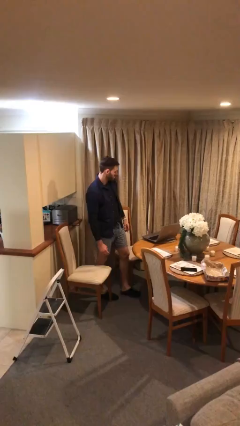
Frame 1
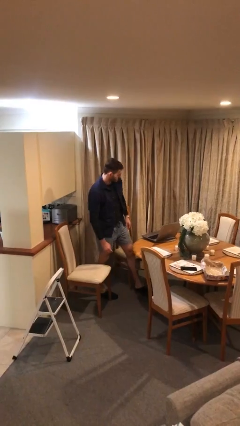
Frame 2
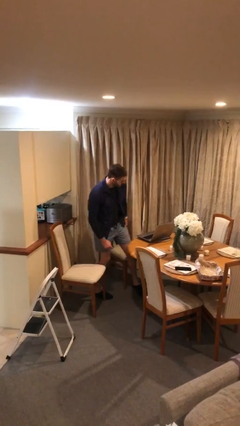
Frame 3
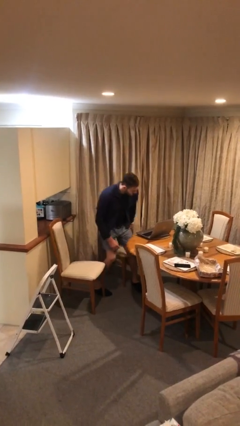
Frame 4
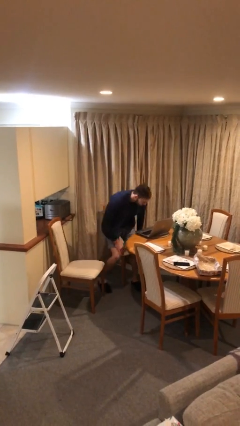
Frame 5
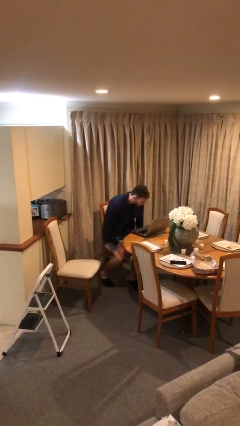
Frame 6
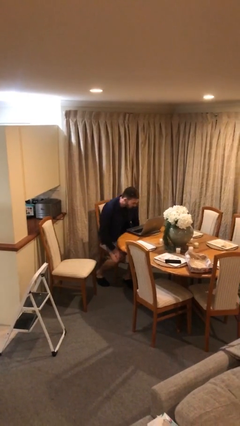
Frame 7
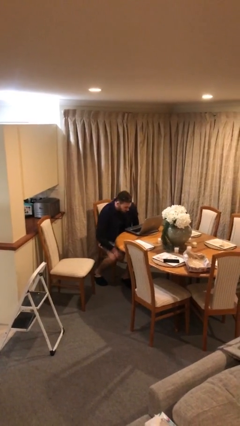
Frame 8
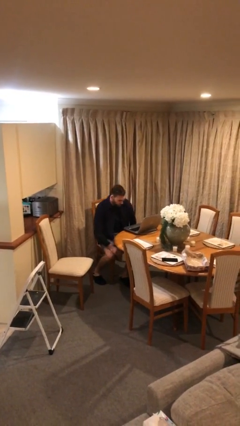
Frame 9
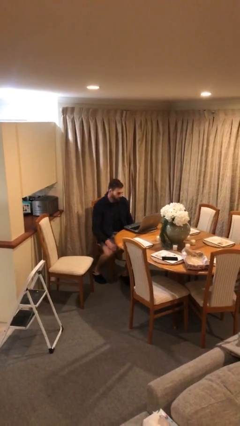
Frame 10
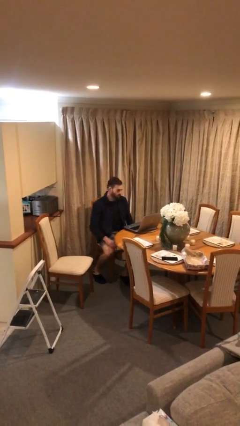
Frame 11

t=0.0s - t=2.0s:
person sits down

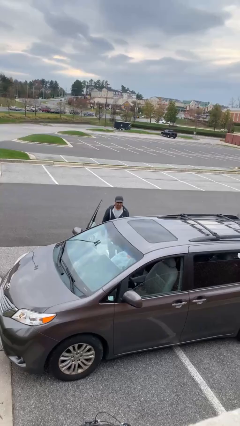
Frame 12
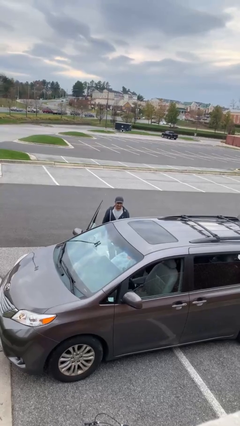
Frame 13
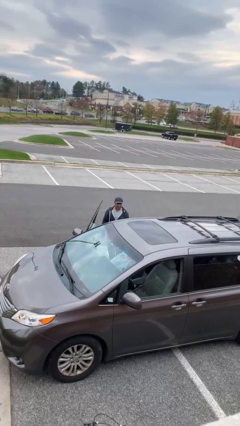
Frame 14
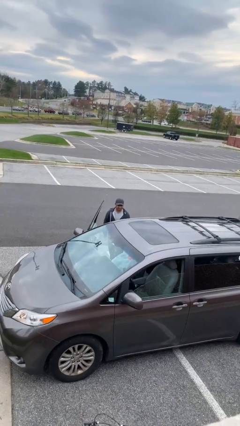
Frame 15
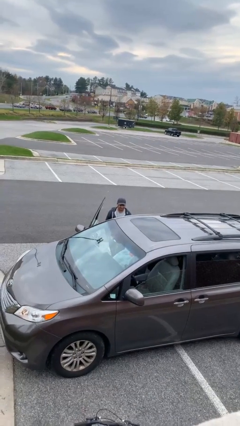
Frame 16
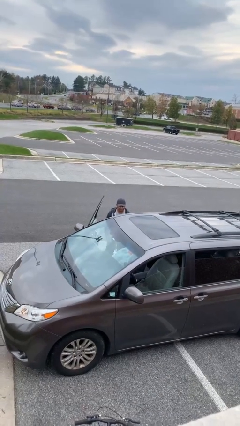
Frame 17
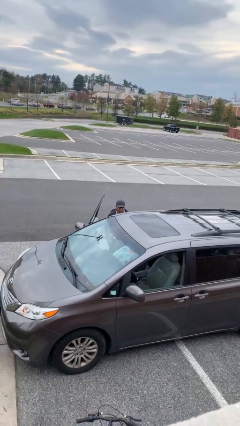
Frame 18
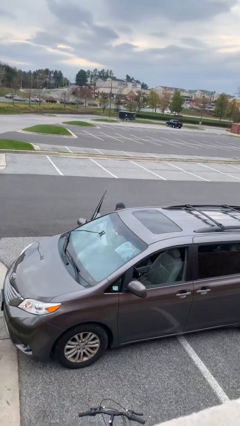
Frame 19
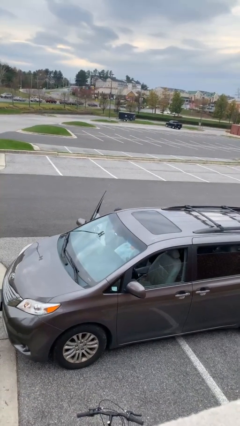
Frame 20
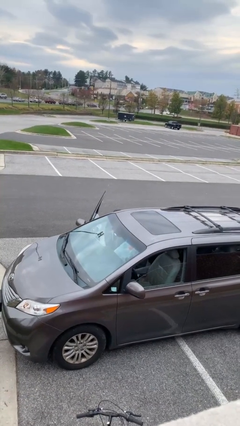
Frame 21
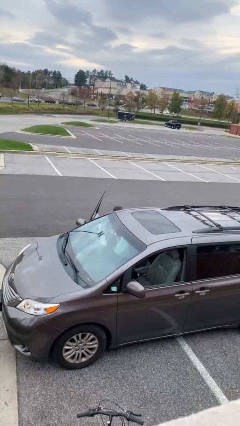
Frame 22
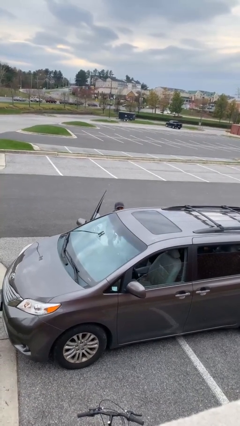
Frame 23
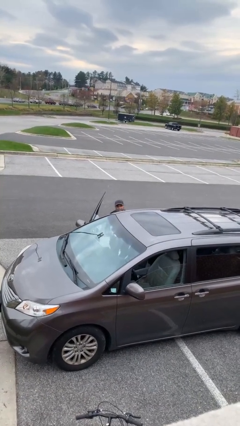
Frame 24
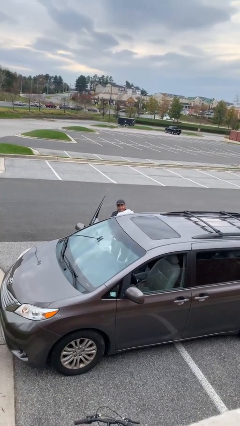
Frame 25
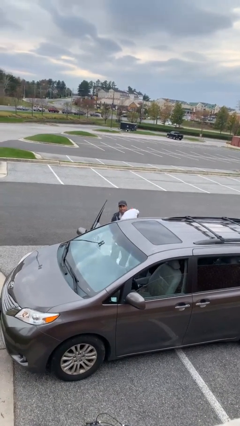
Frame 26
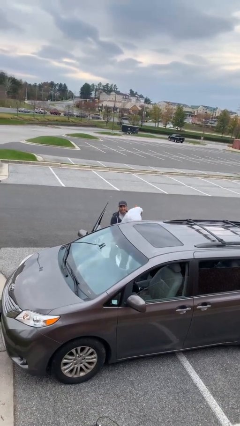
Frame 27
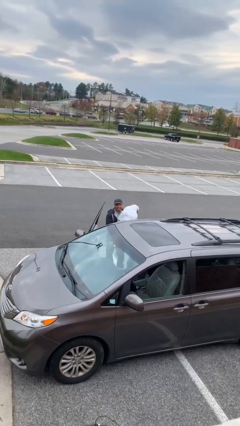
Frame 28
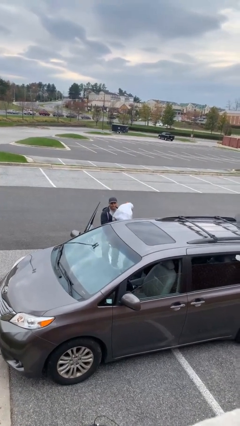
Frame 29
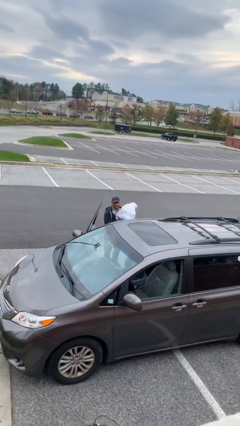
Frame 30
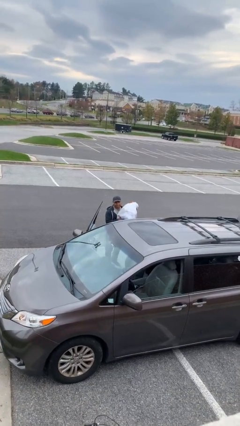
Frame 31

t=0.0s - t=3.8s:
person unloads car

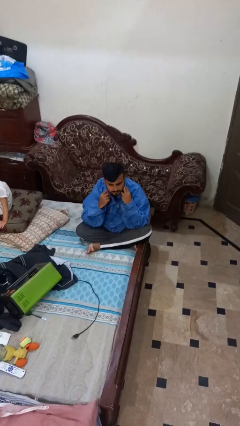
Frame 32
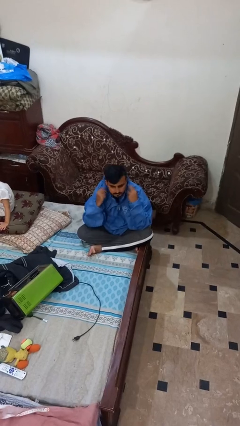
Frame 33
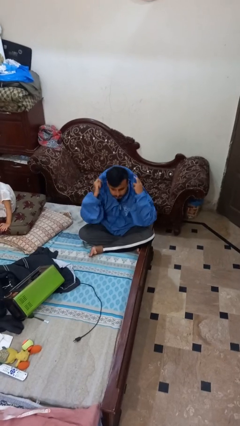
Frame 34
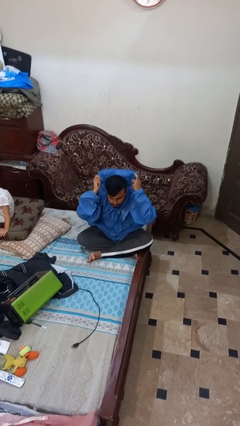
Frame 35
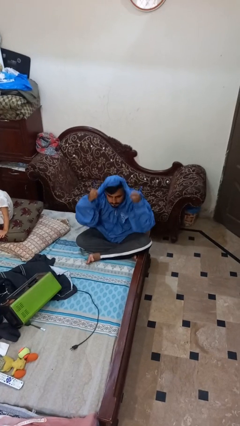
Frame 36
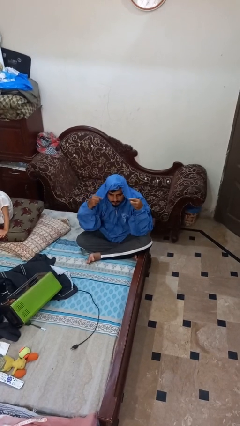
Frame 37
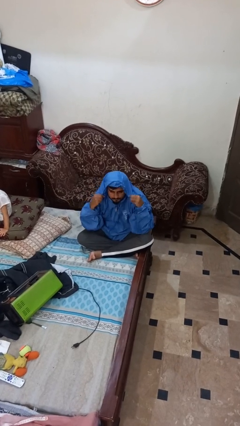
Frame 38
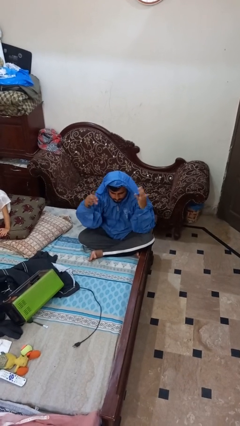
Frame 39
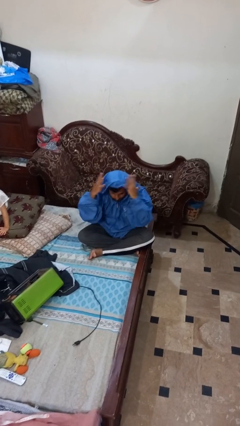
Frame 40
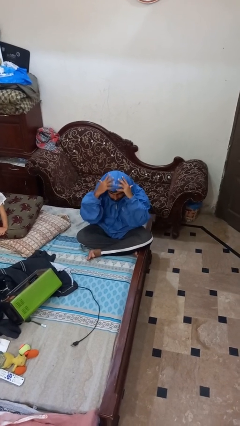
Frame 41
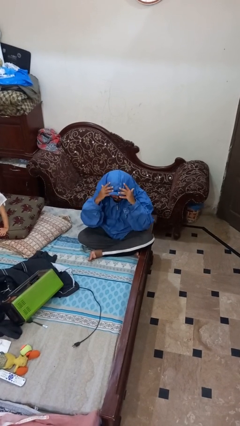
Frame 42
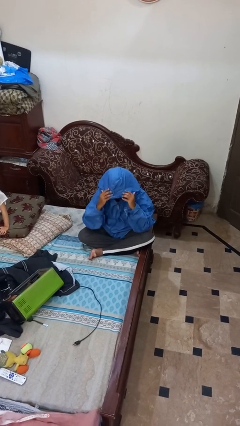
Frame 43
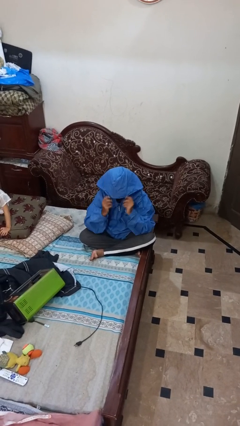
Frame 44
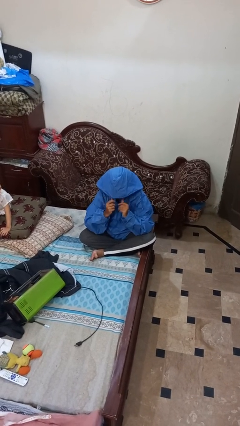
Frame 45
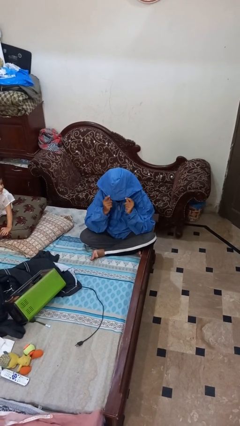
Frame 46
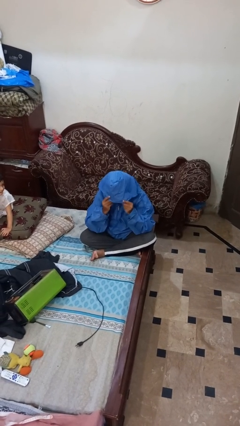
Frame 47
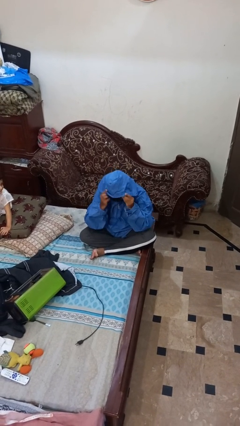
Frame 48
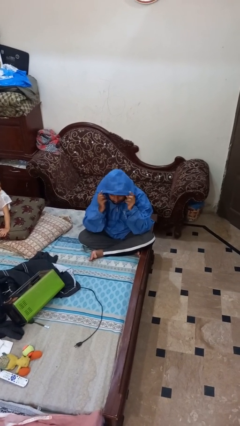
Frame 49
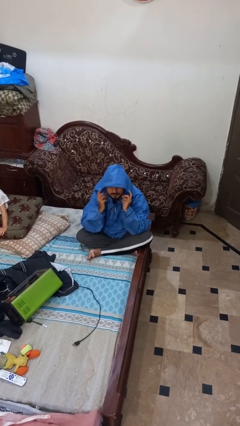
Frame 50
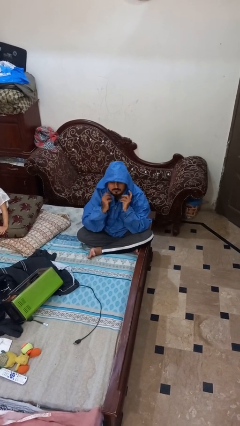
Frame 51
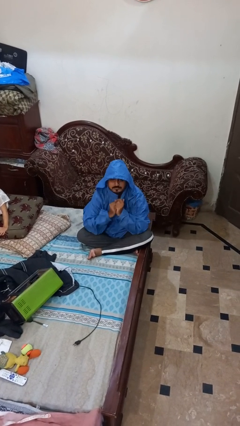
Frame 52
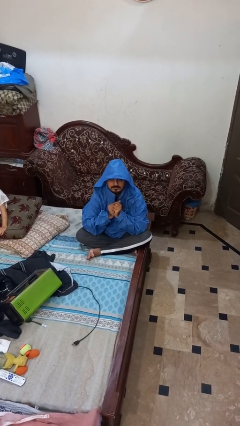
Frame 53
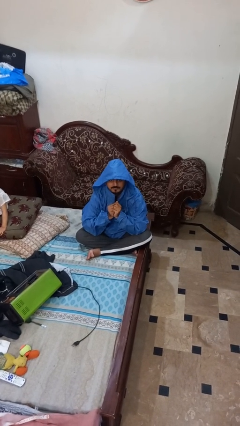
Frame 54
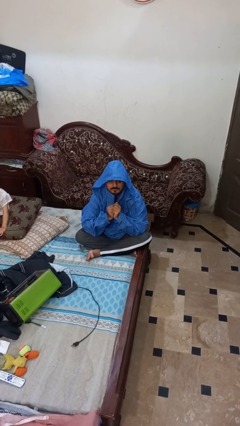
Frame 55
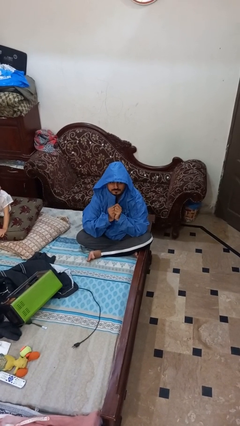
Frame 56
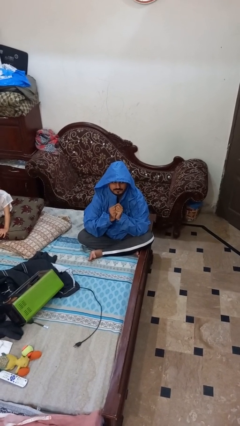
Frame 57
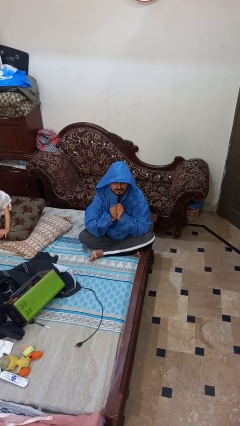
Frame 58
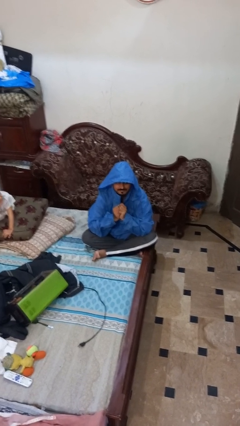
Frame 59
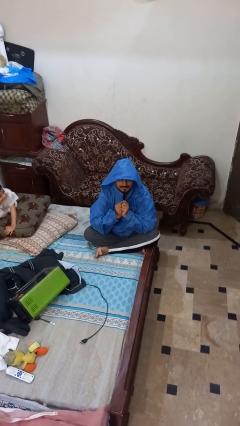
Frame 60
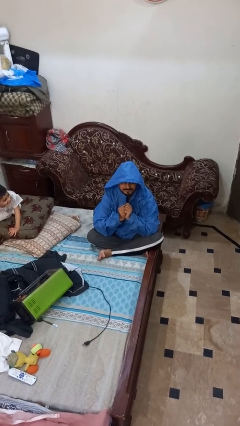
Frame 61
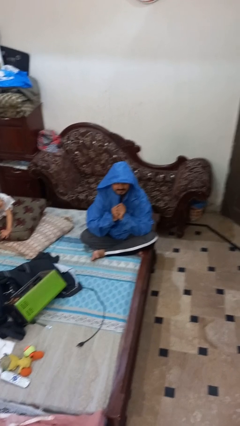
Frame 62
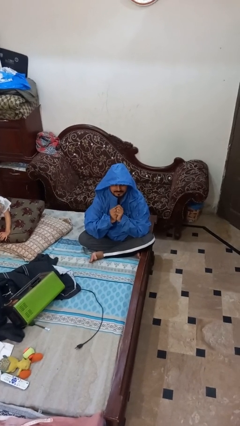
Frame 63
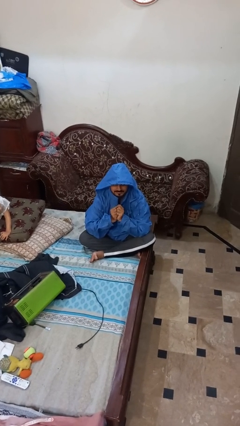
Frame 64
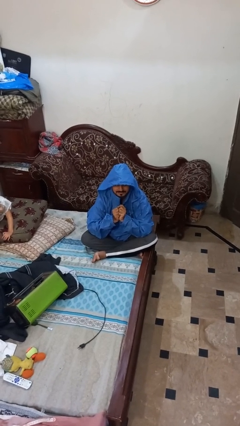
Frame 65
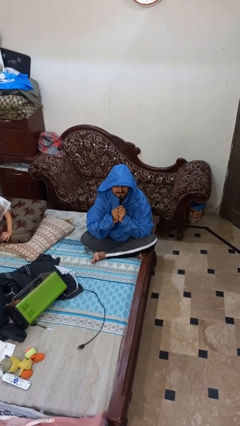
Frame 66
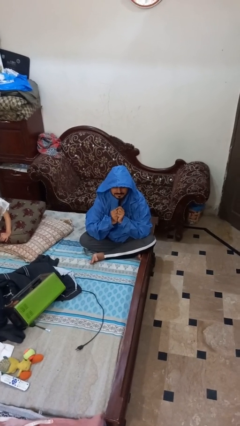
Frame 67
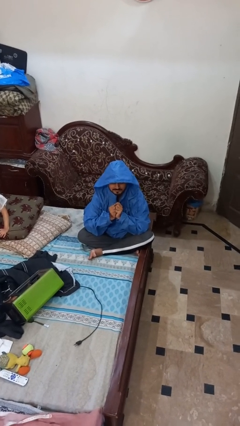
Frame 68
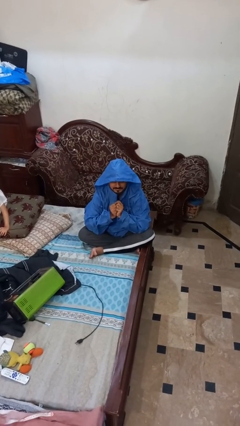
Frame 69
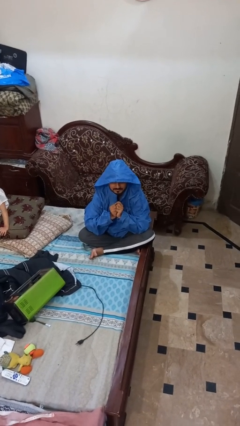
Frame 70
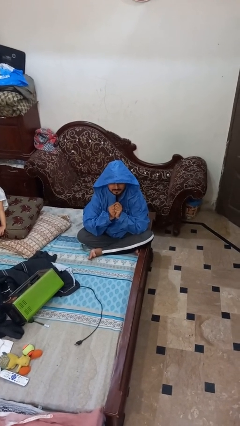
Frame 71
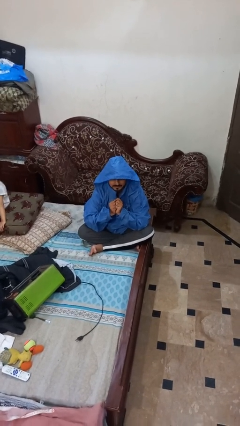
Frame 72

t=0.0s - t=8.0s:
person puts on hoodie

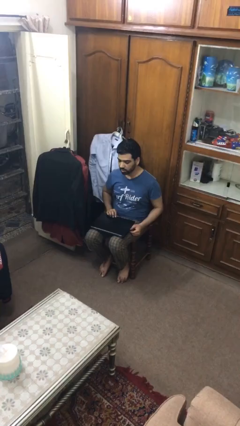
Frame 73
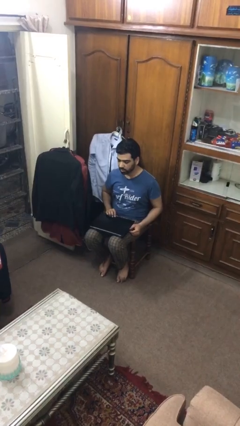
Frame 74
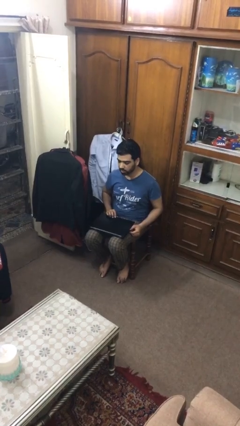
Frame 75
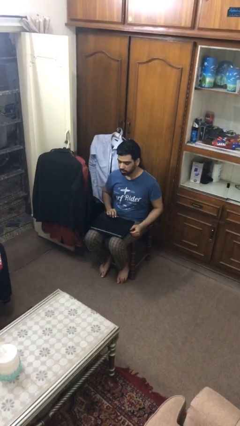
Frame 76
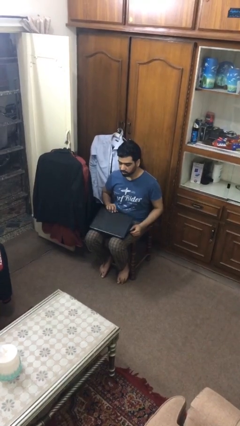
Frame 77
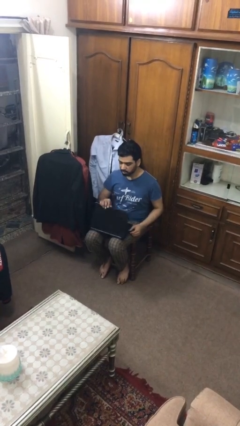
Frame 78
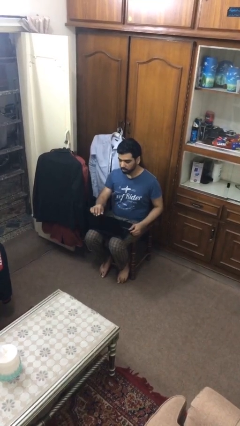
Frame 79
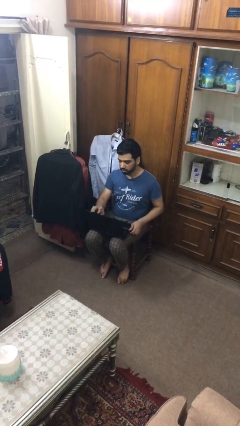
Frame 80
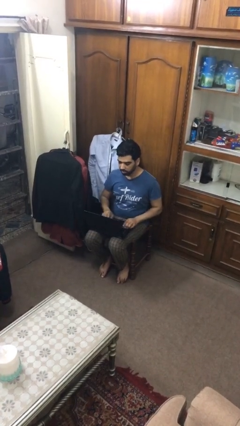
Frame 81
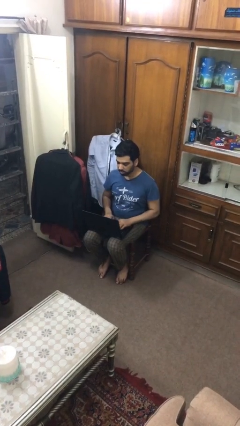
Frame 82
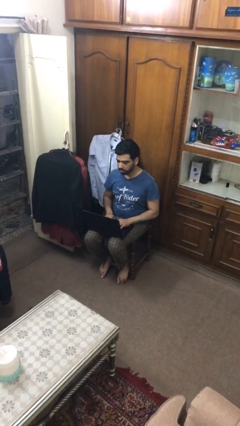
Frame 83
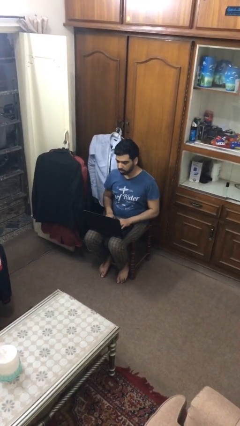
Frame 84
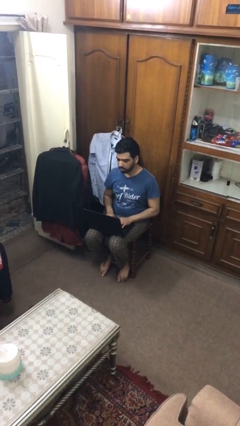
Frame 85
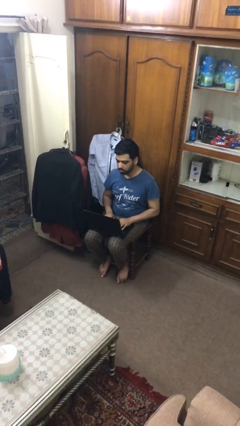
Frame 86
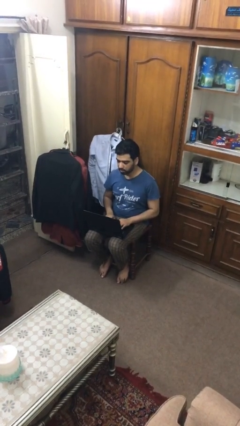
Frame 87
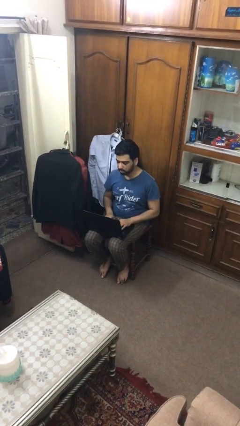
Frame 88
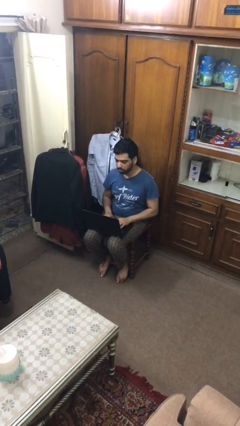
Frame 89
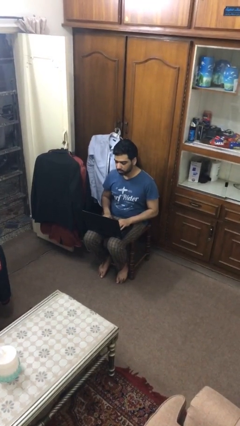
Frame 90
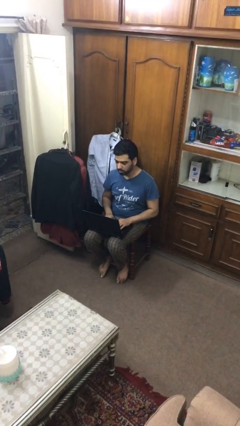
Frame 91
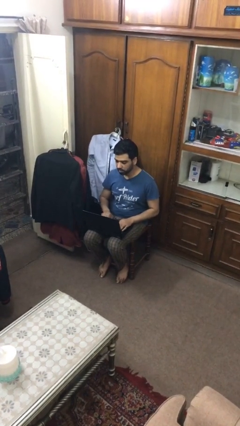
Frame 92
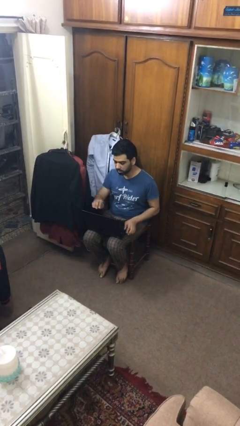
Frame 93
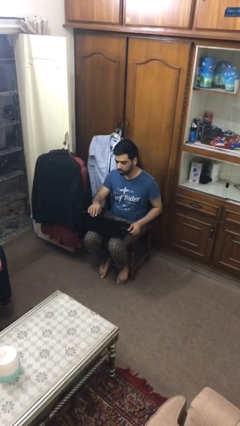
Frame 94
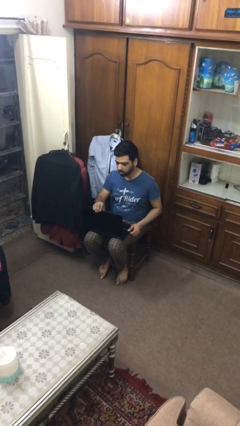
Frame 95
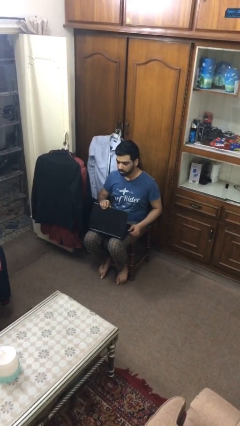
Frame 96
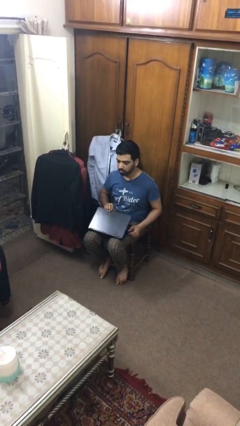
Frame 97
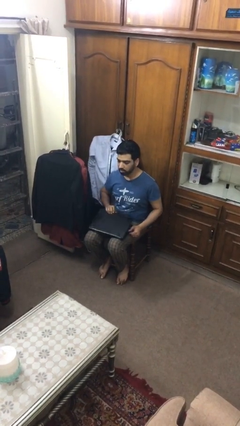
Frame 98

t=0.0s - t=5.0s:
person interacts with laptop
